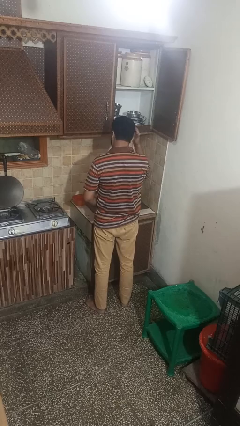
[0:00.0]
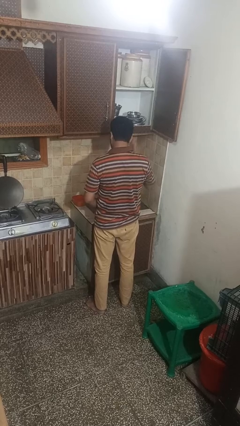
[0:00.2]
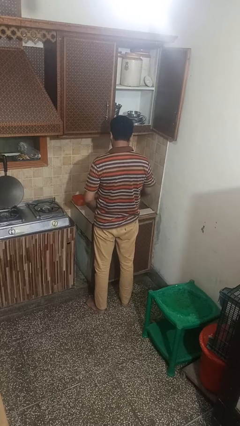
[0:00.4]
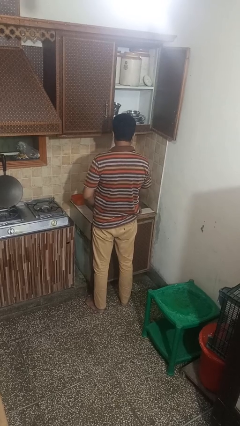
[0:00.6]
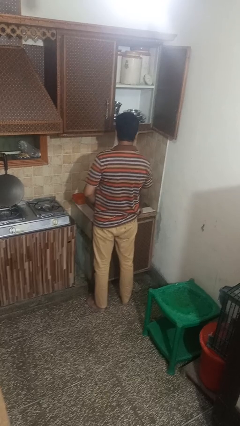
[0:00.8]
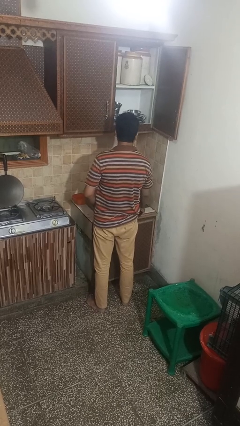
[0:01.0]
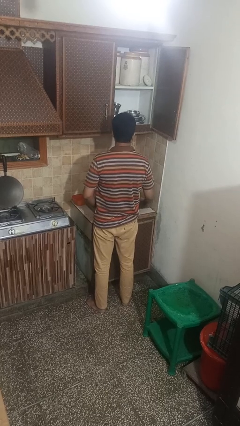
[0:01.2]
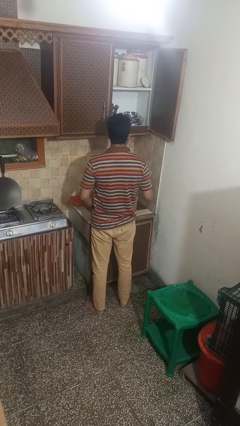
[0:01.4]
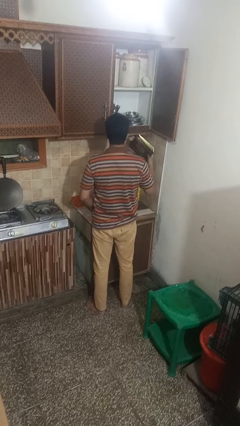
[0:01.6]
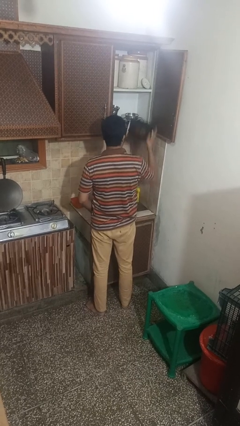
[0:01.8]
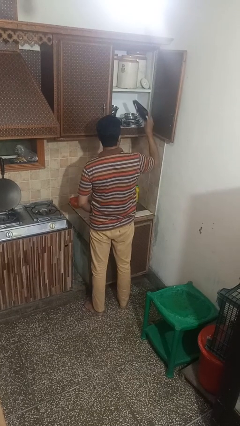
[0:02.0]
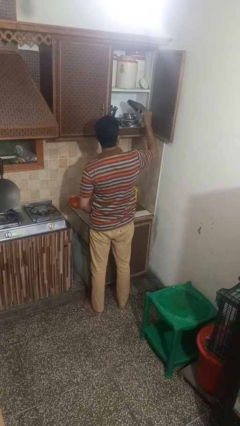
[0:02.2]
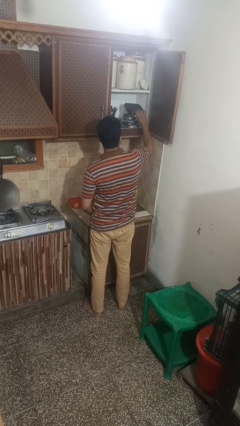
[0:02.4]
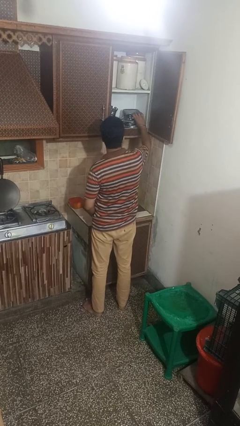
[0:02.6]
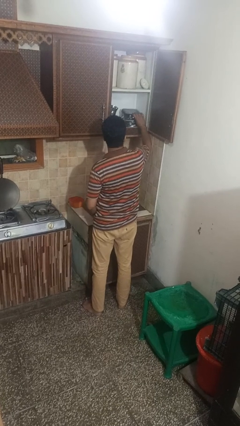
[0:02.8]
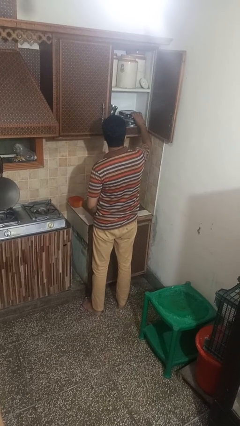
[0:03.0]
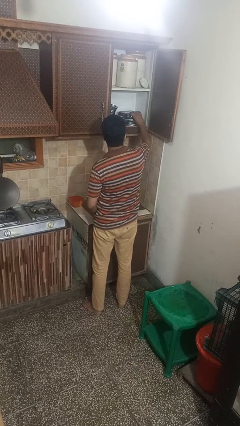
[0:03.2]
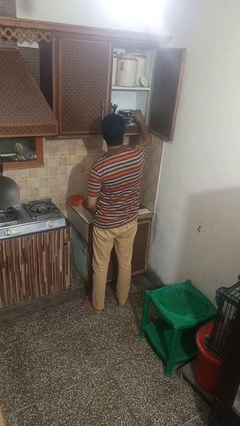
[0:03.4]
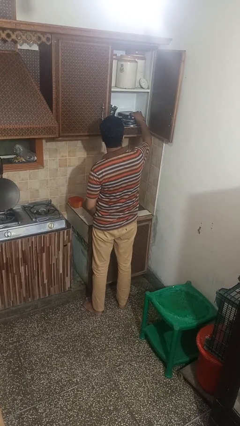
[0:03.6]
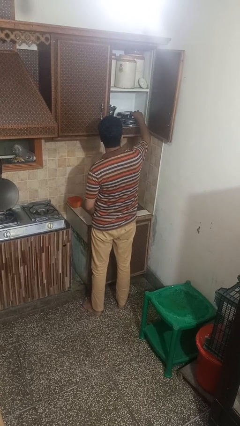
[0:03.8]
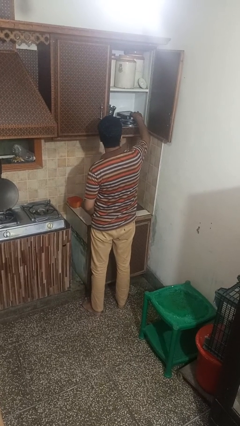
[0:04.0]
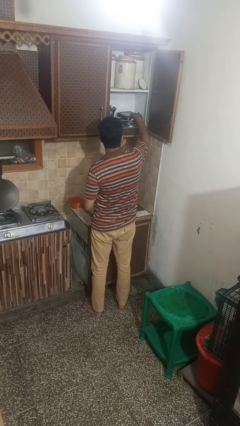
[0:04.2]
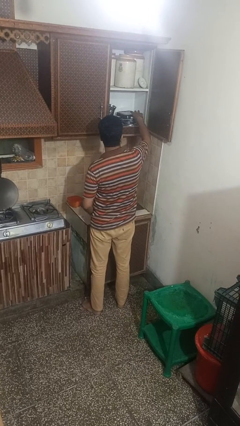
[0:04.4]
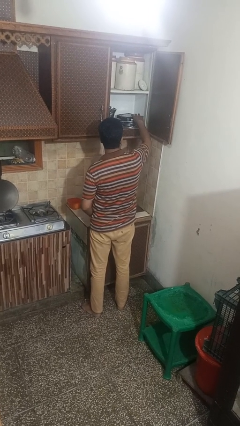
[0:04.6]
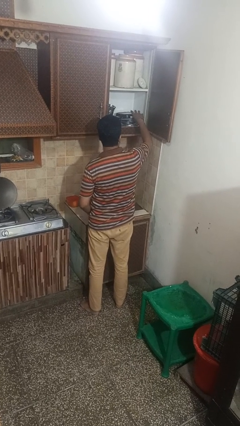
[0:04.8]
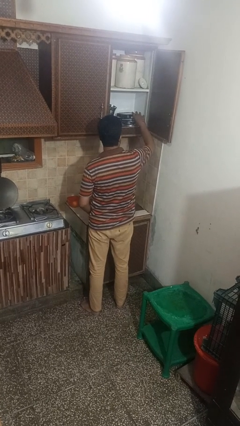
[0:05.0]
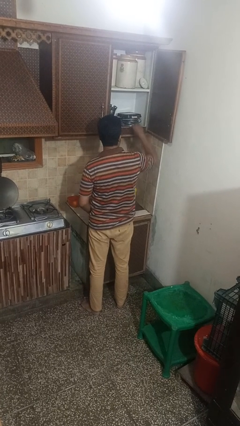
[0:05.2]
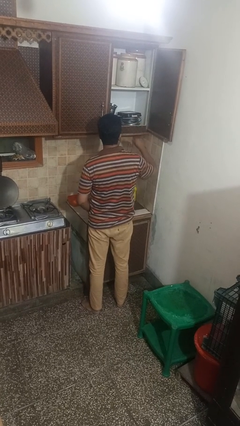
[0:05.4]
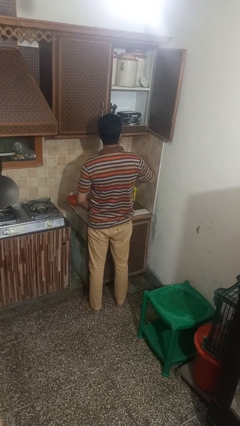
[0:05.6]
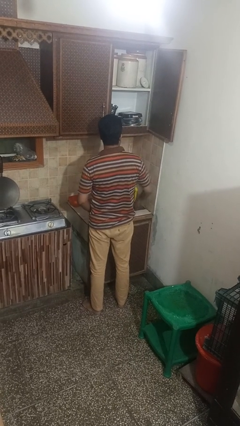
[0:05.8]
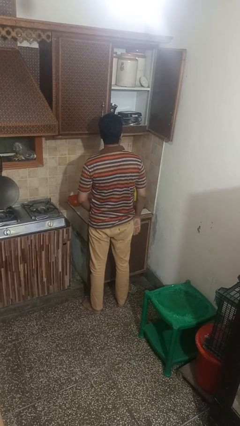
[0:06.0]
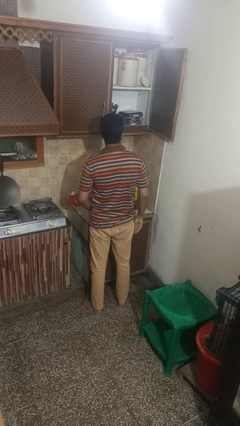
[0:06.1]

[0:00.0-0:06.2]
person puts object in cabinet

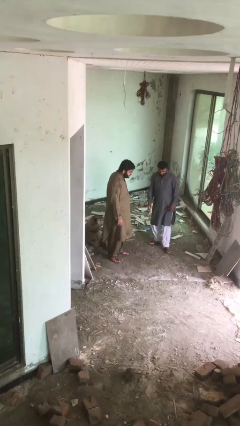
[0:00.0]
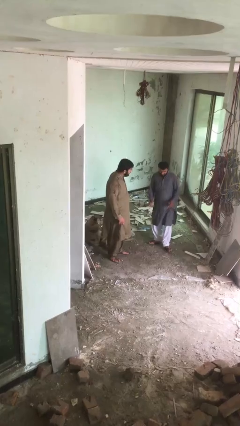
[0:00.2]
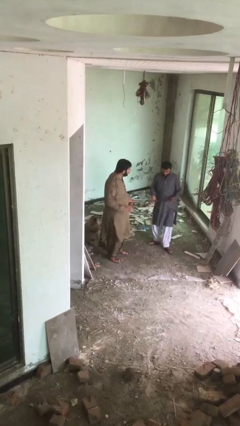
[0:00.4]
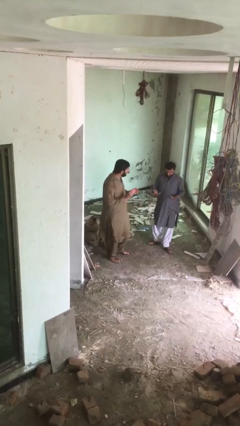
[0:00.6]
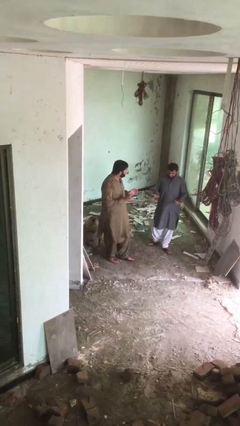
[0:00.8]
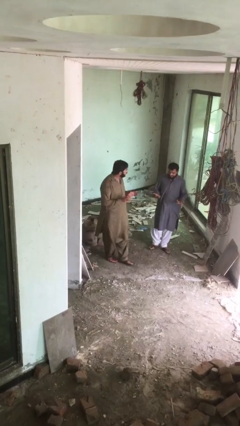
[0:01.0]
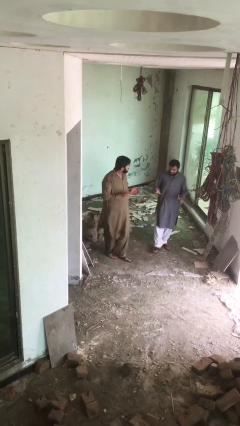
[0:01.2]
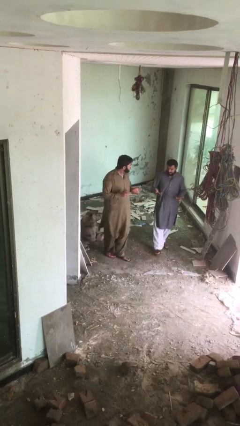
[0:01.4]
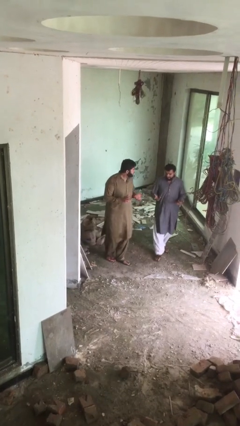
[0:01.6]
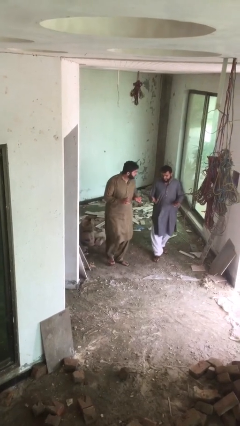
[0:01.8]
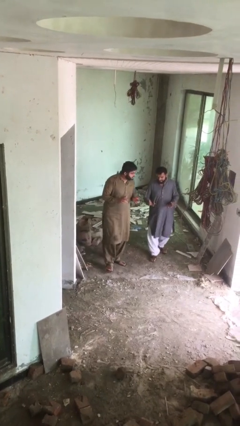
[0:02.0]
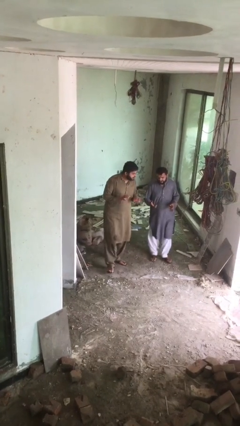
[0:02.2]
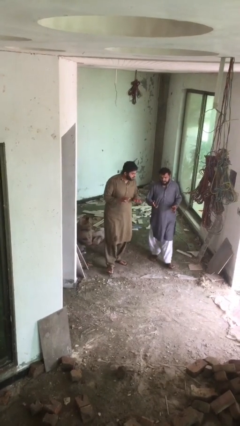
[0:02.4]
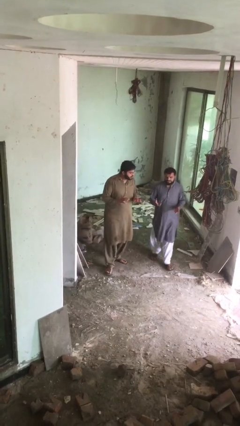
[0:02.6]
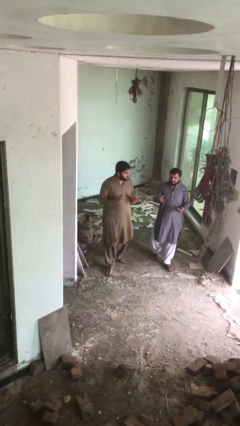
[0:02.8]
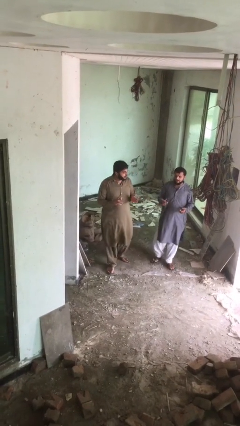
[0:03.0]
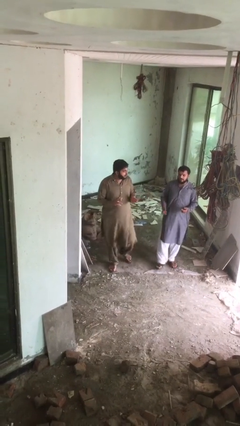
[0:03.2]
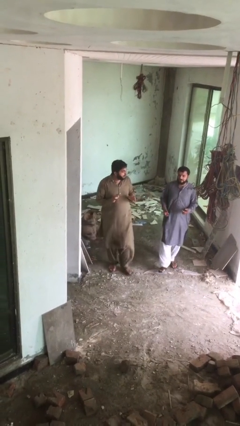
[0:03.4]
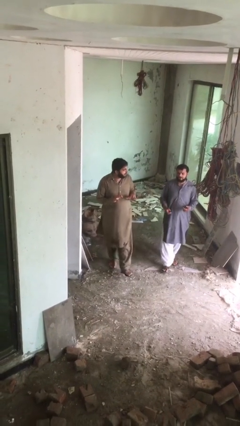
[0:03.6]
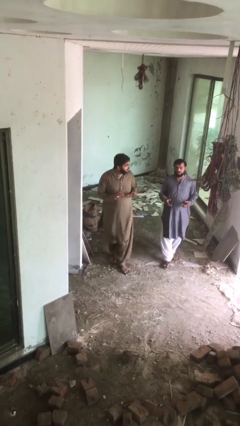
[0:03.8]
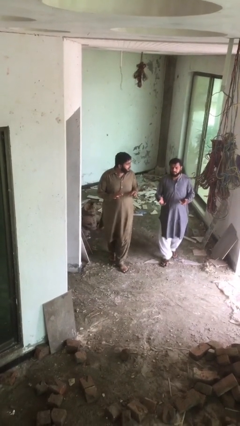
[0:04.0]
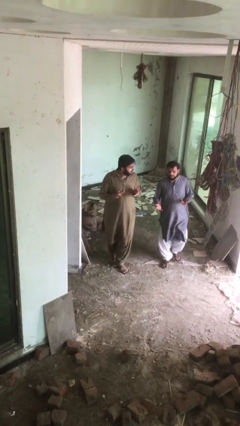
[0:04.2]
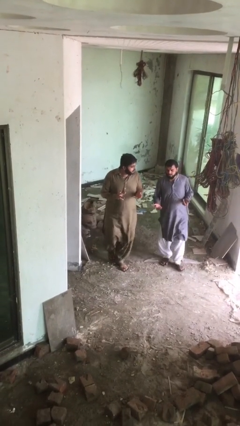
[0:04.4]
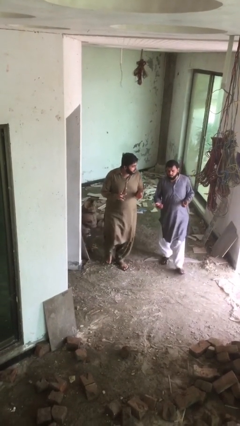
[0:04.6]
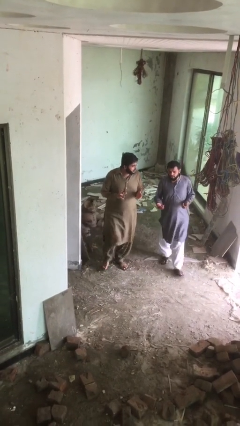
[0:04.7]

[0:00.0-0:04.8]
person talks to person

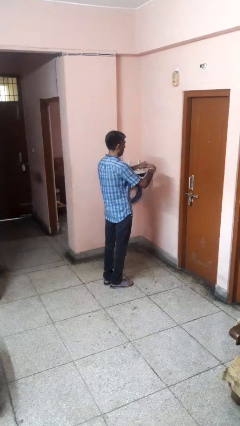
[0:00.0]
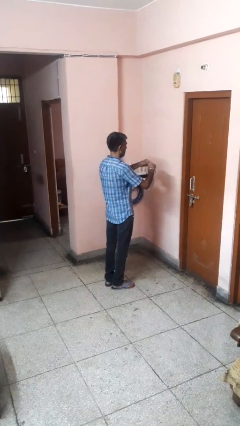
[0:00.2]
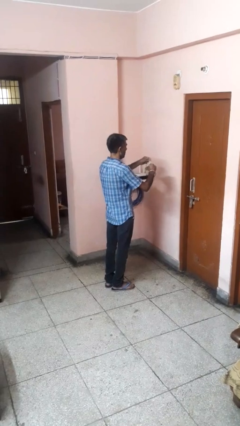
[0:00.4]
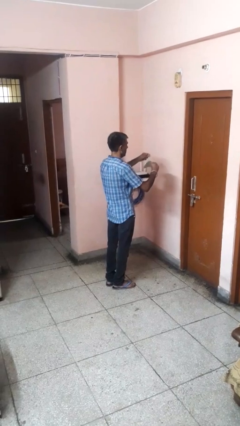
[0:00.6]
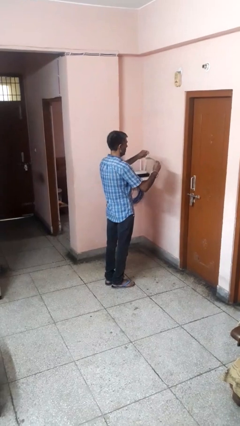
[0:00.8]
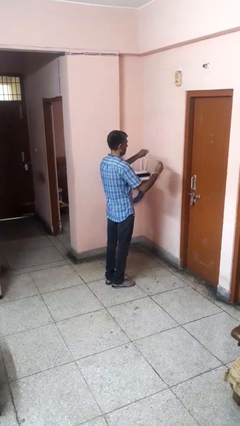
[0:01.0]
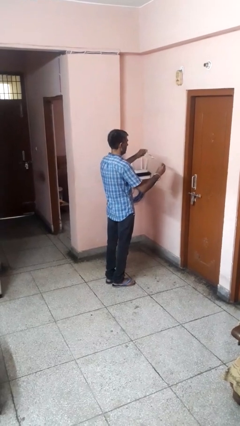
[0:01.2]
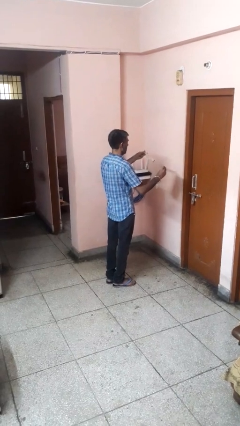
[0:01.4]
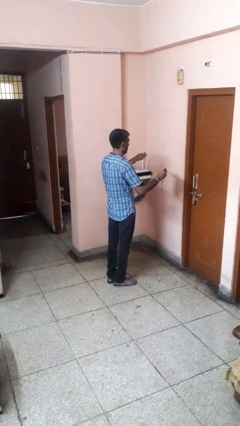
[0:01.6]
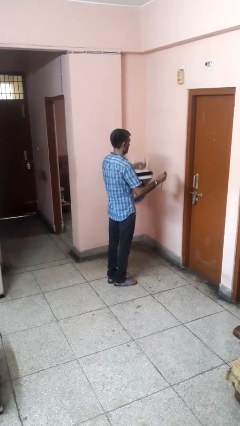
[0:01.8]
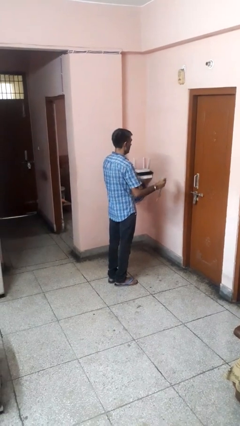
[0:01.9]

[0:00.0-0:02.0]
person tears paper

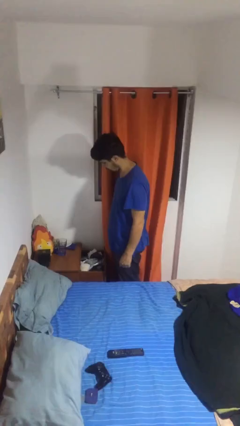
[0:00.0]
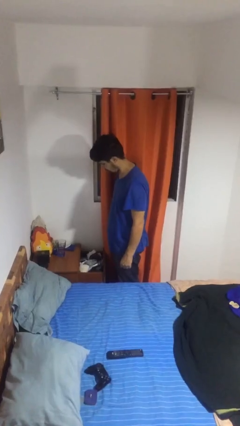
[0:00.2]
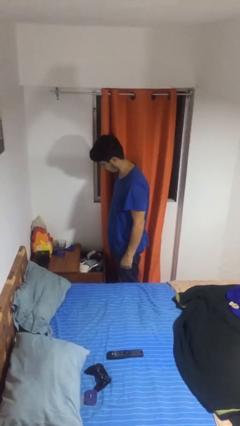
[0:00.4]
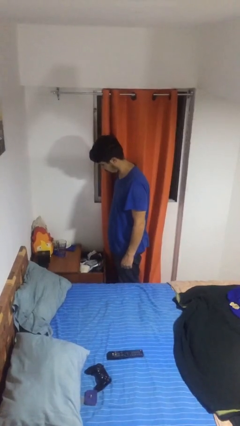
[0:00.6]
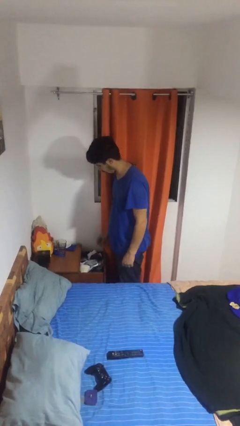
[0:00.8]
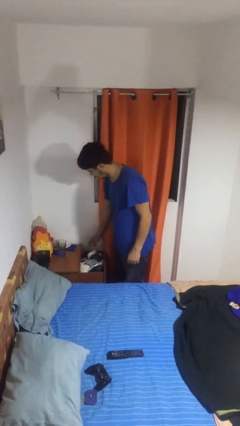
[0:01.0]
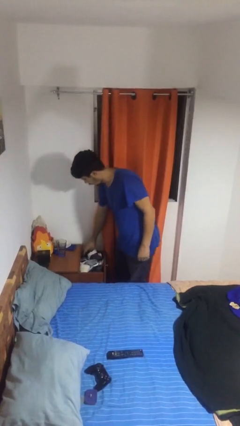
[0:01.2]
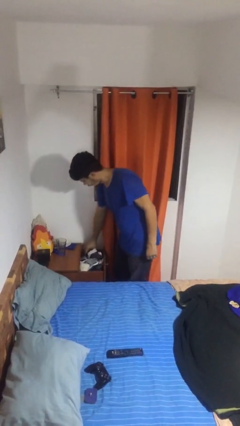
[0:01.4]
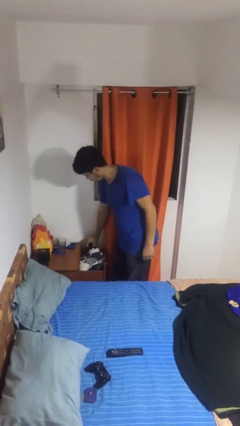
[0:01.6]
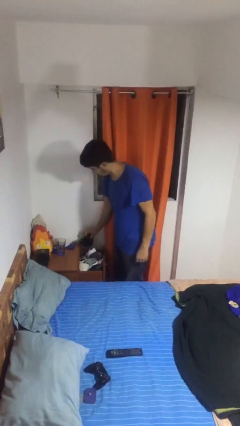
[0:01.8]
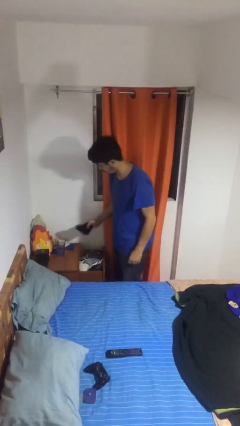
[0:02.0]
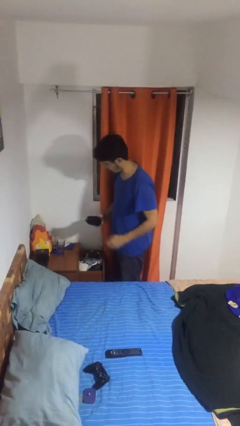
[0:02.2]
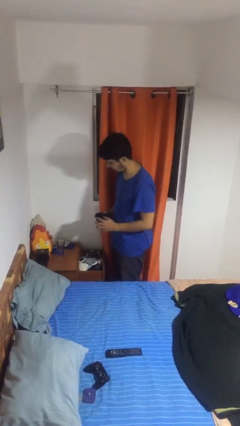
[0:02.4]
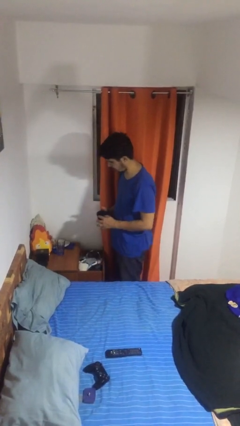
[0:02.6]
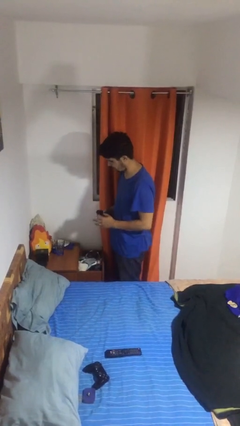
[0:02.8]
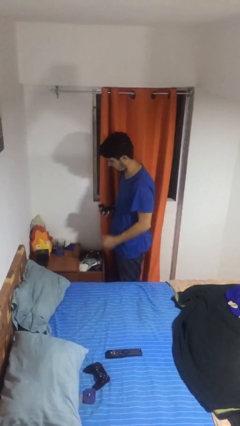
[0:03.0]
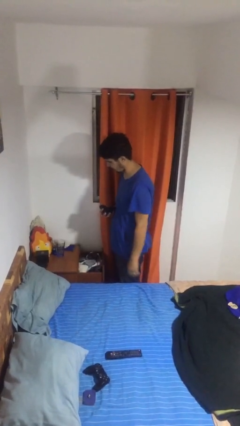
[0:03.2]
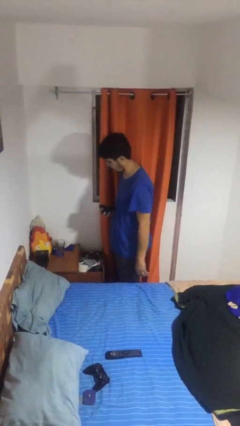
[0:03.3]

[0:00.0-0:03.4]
person takes clothes from dresser

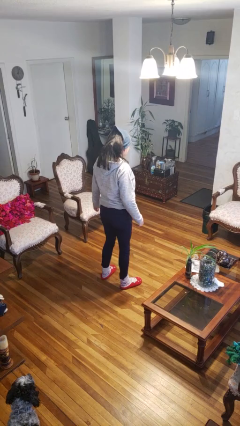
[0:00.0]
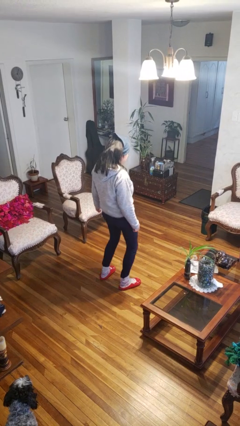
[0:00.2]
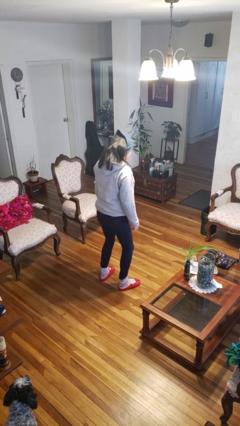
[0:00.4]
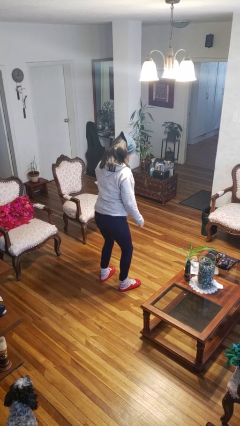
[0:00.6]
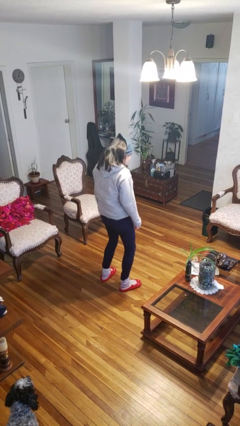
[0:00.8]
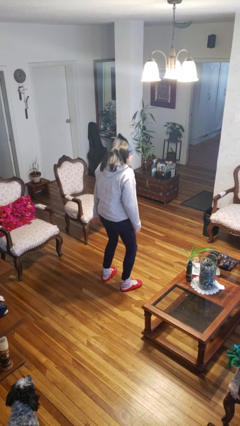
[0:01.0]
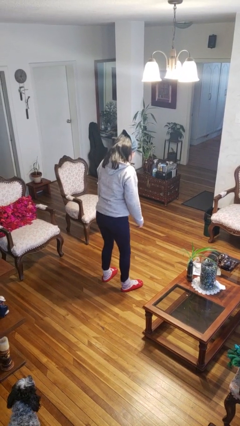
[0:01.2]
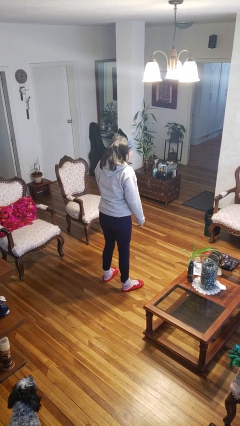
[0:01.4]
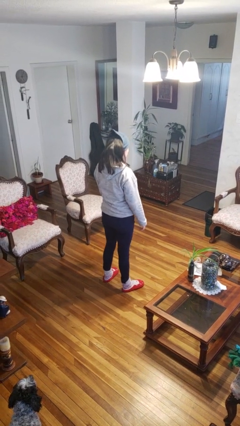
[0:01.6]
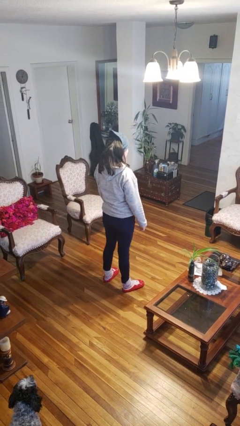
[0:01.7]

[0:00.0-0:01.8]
person wiggles hips
